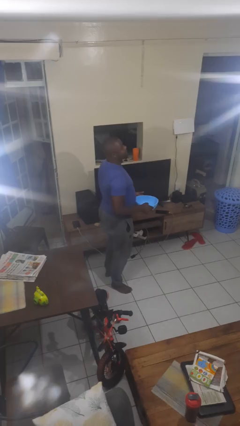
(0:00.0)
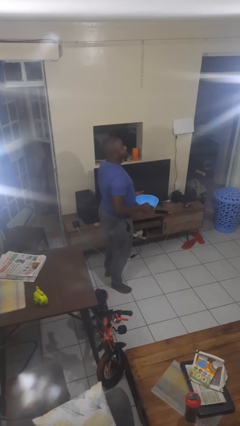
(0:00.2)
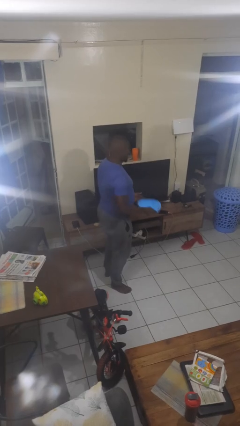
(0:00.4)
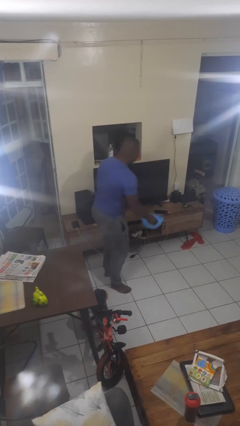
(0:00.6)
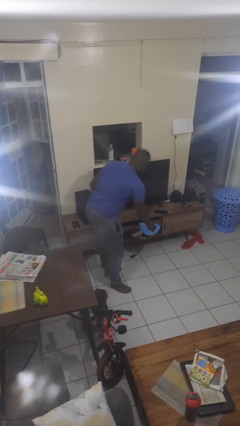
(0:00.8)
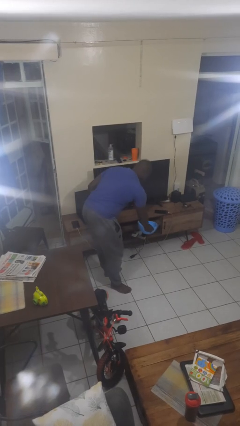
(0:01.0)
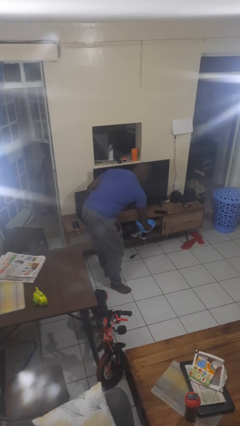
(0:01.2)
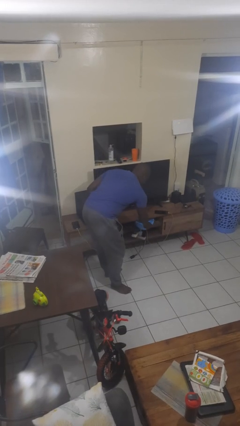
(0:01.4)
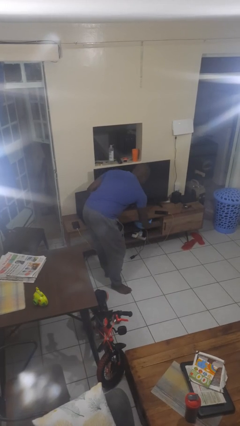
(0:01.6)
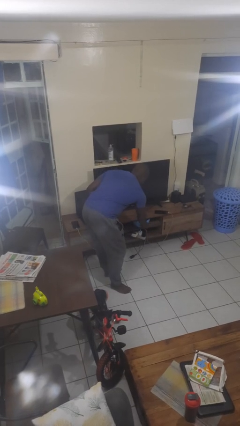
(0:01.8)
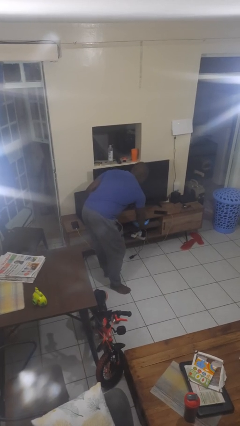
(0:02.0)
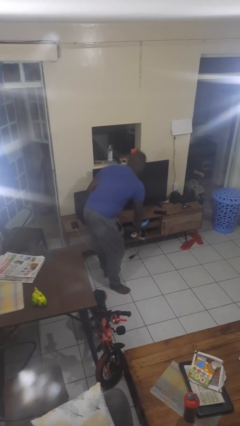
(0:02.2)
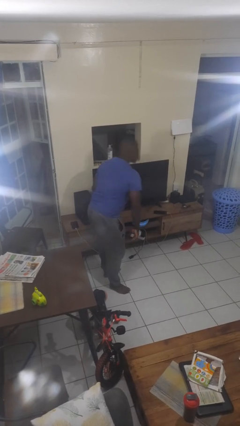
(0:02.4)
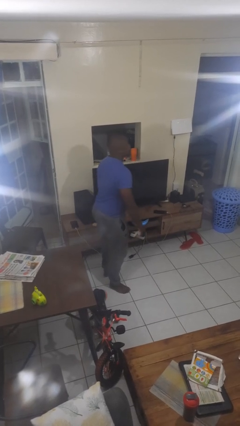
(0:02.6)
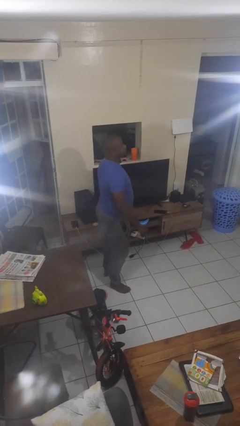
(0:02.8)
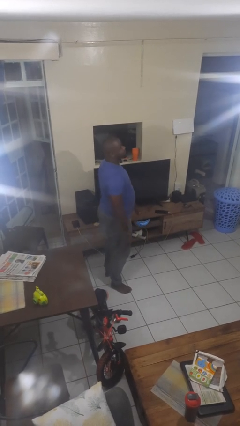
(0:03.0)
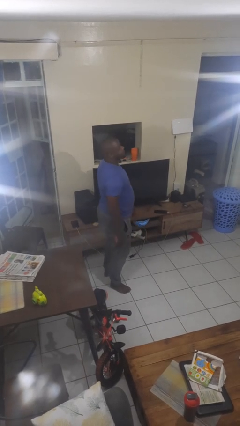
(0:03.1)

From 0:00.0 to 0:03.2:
person puts down object into cabinet

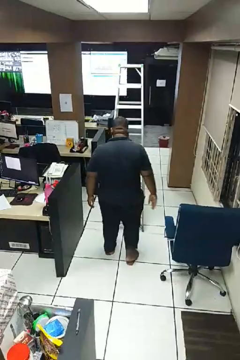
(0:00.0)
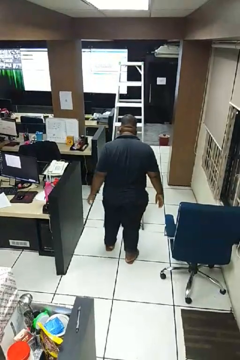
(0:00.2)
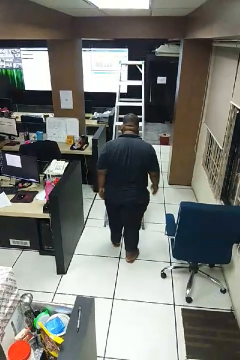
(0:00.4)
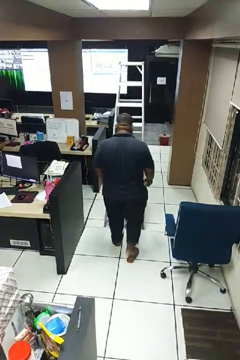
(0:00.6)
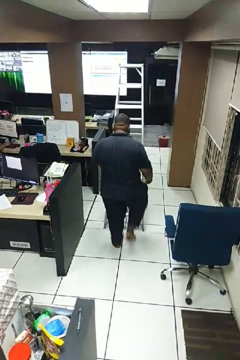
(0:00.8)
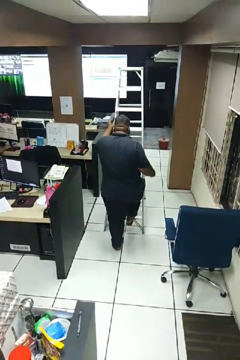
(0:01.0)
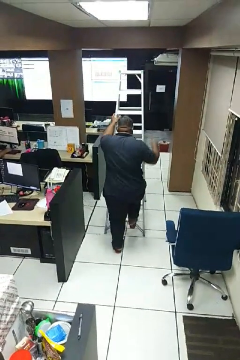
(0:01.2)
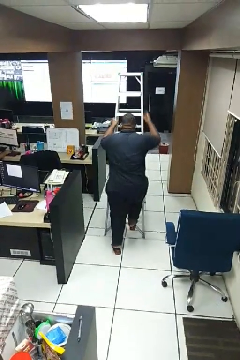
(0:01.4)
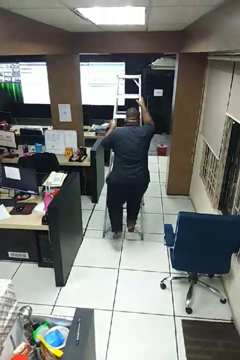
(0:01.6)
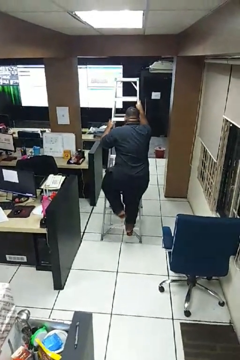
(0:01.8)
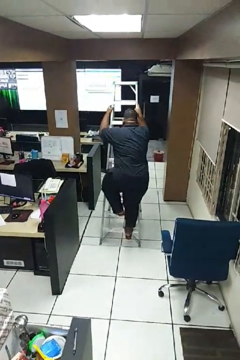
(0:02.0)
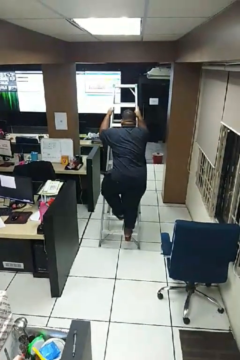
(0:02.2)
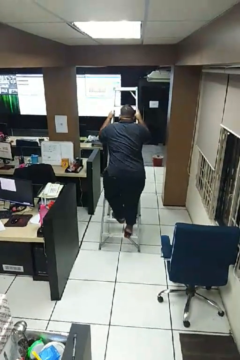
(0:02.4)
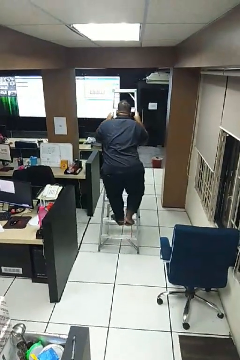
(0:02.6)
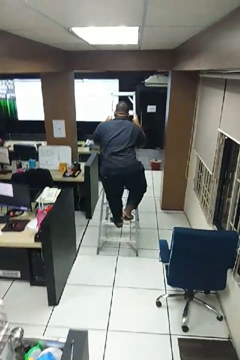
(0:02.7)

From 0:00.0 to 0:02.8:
person climbs up ladder

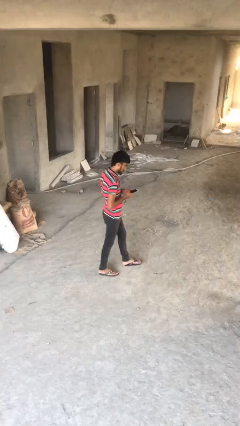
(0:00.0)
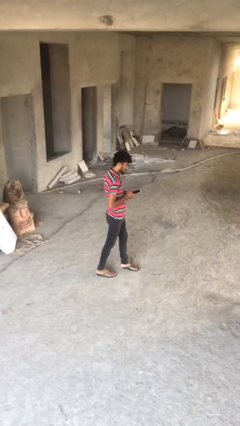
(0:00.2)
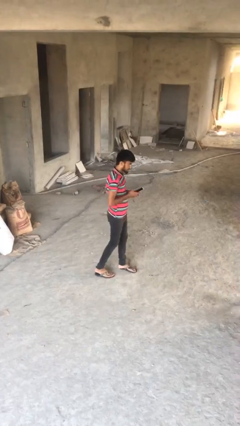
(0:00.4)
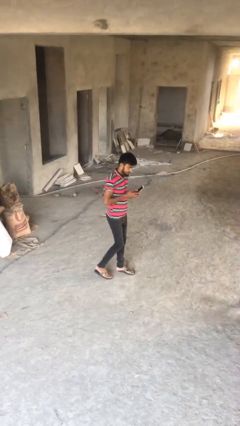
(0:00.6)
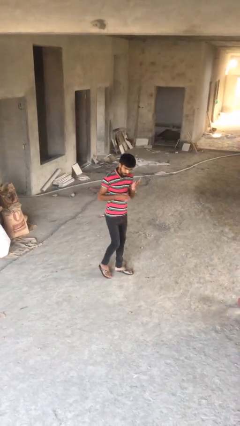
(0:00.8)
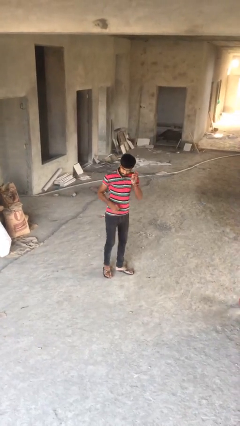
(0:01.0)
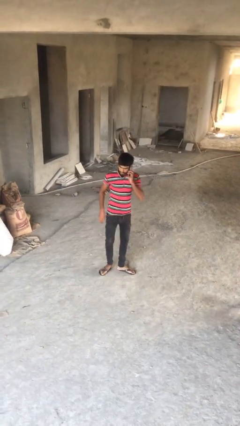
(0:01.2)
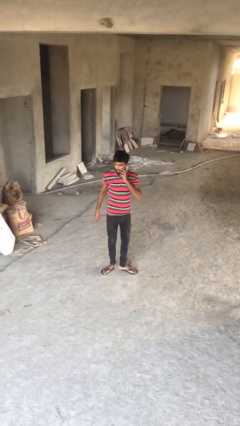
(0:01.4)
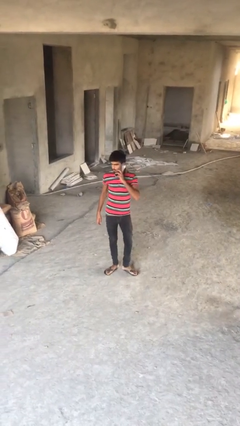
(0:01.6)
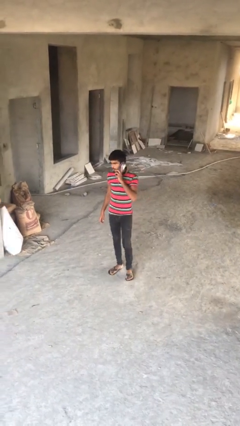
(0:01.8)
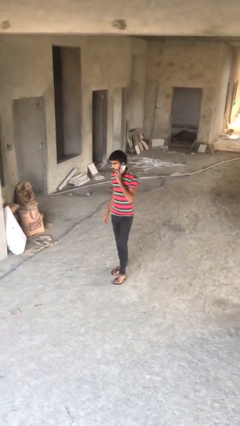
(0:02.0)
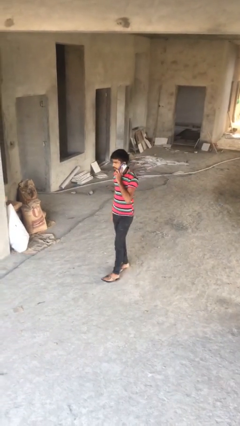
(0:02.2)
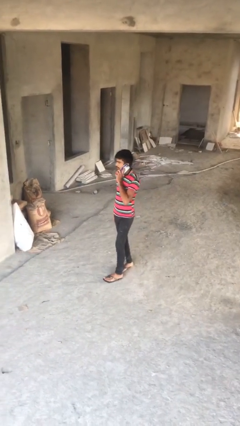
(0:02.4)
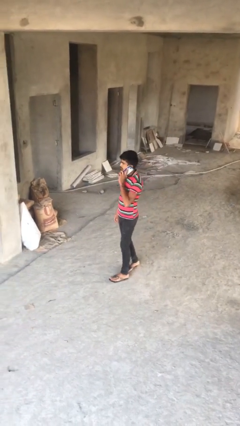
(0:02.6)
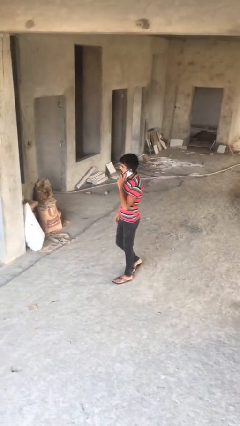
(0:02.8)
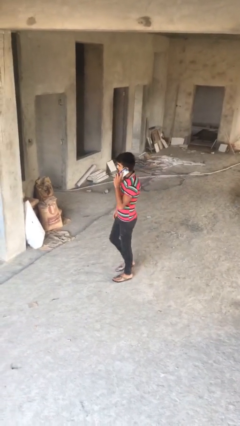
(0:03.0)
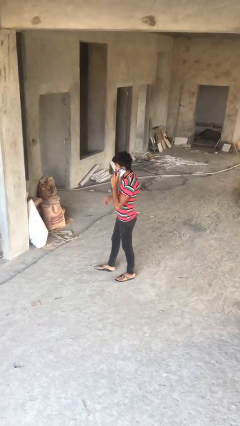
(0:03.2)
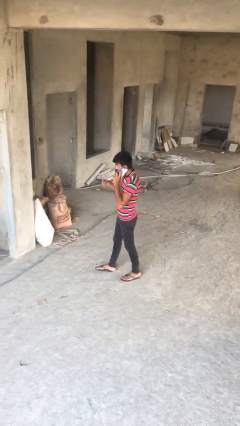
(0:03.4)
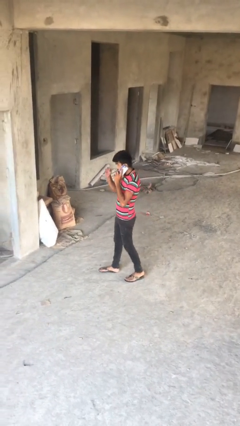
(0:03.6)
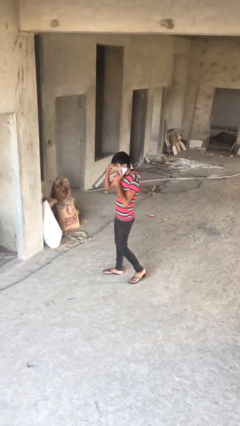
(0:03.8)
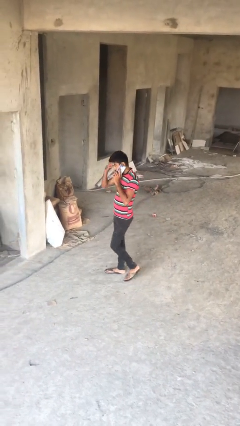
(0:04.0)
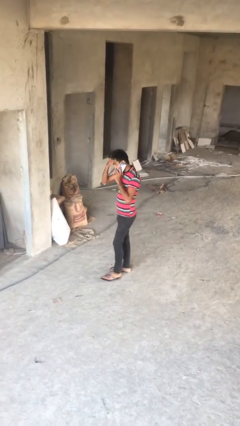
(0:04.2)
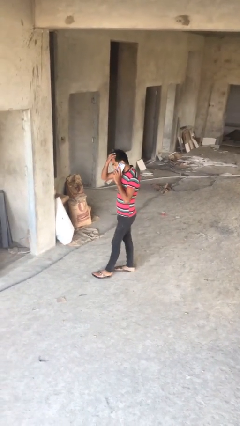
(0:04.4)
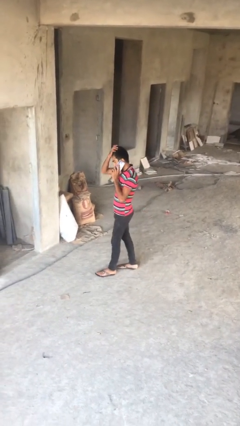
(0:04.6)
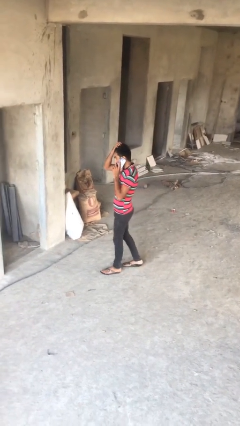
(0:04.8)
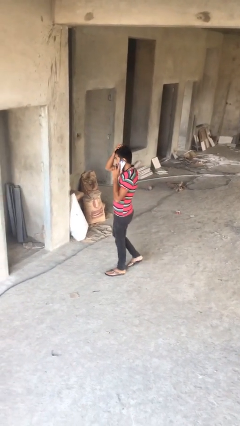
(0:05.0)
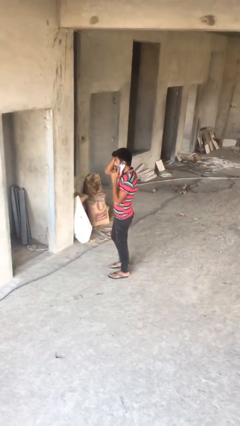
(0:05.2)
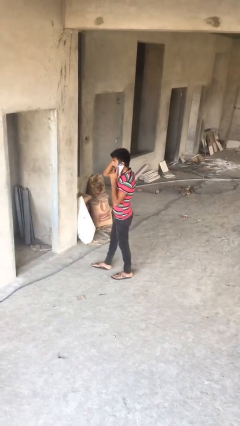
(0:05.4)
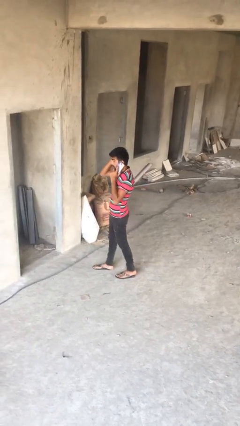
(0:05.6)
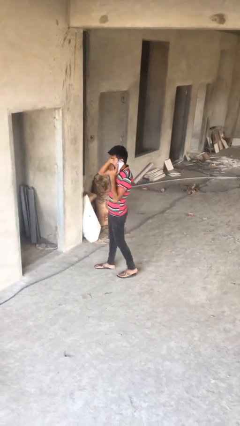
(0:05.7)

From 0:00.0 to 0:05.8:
person talks on phone

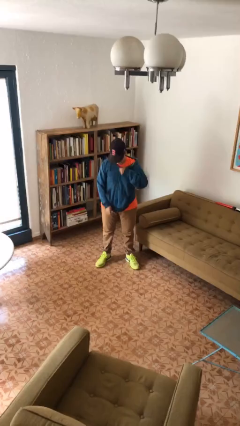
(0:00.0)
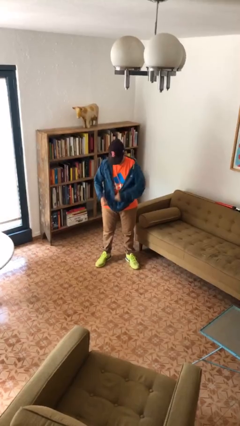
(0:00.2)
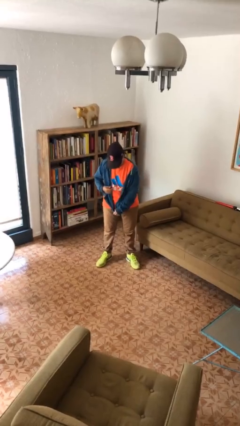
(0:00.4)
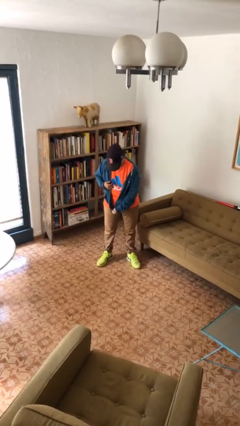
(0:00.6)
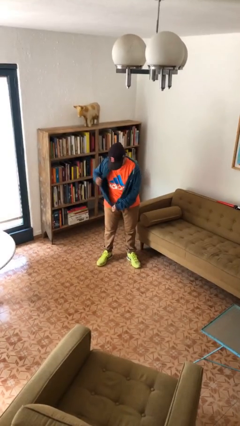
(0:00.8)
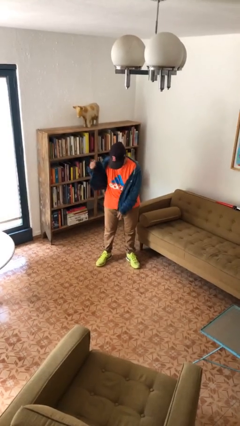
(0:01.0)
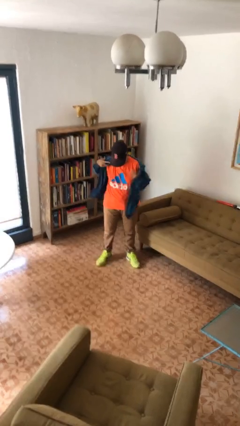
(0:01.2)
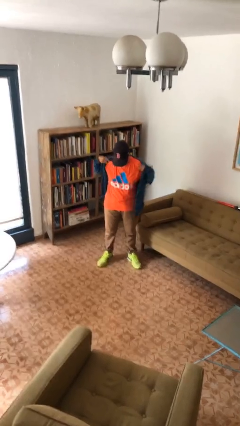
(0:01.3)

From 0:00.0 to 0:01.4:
person unzips jacket

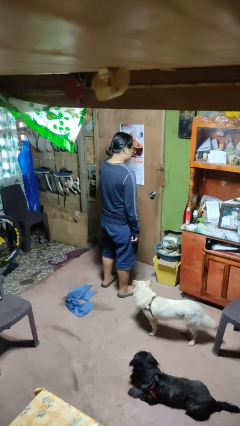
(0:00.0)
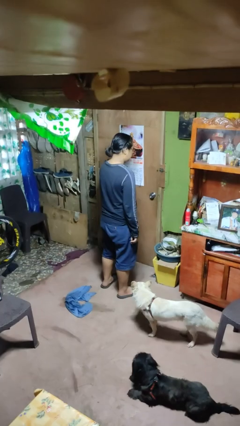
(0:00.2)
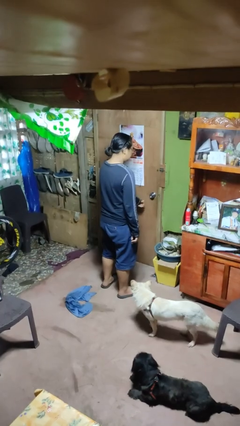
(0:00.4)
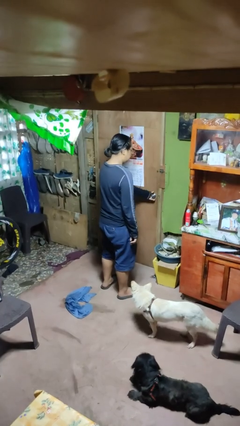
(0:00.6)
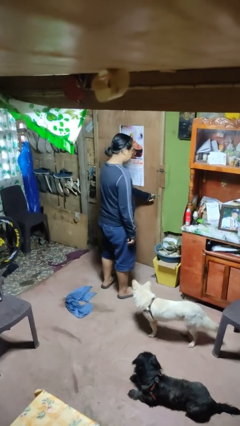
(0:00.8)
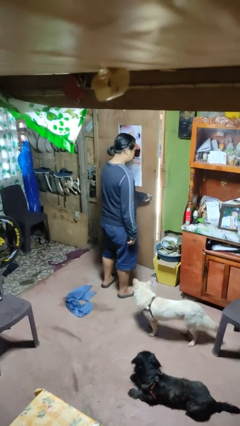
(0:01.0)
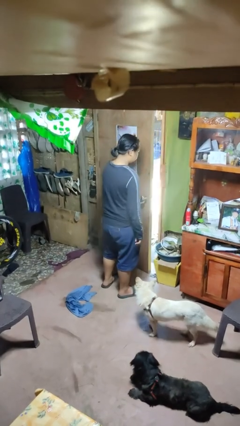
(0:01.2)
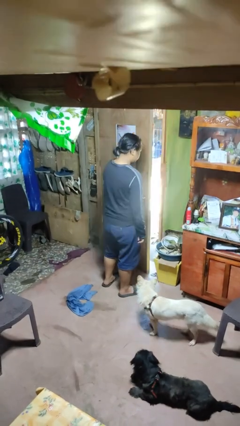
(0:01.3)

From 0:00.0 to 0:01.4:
person opens facility door

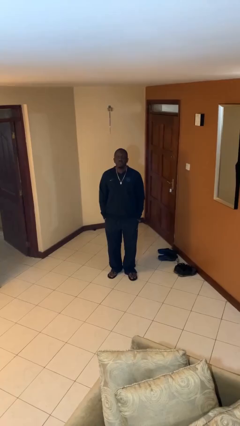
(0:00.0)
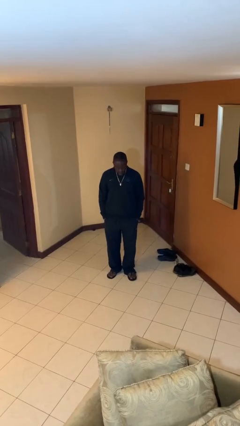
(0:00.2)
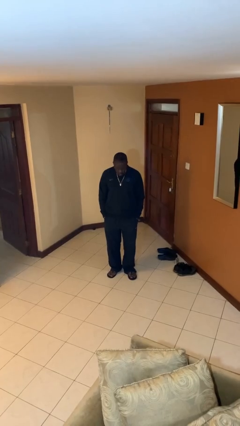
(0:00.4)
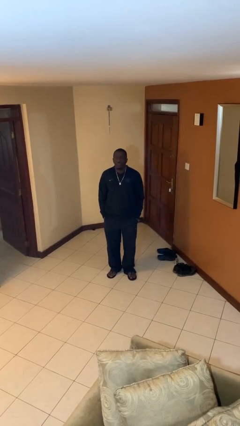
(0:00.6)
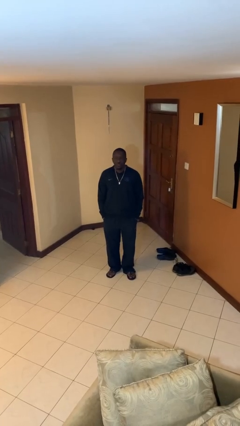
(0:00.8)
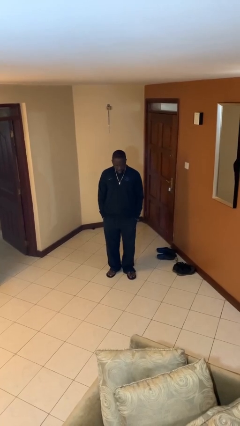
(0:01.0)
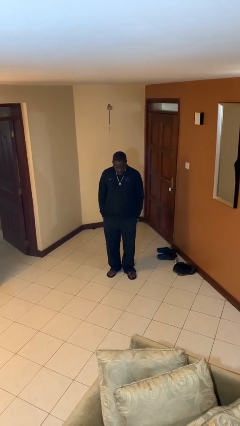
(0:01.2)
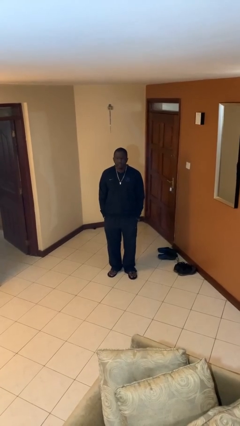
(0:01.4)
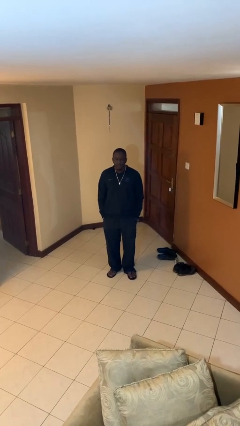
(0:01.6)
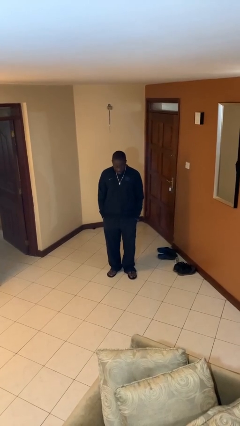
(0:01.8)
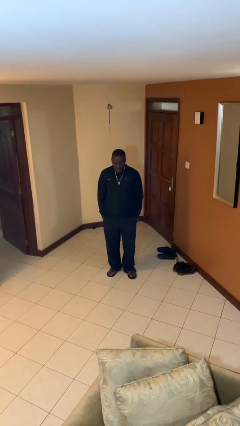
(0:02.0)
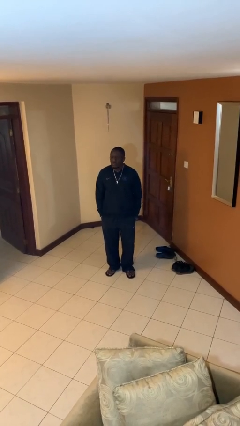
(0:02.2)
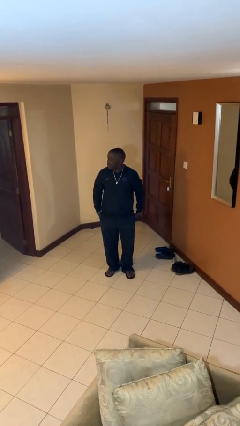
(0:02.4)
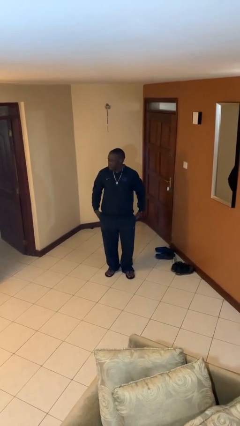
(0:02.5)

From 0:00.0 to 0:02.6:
person nods head

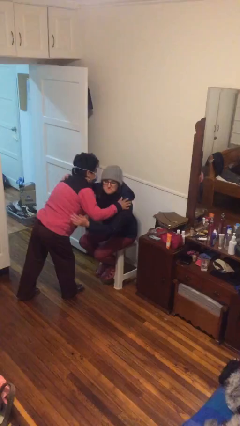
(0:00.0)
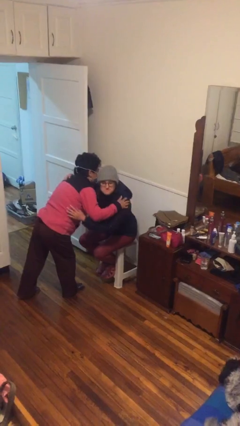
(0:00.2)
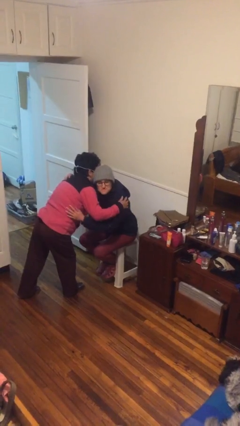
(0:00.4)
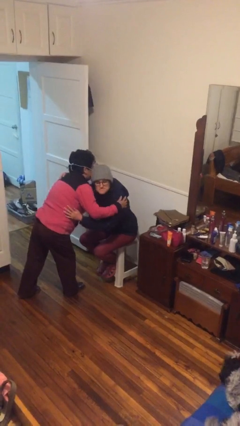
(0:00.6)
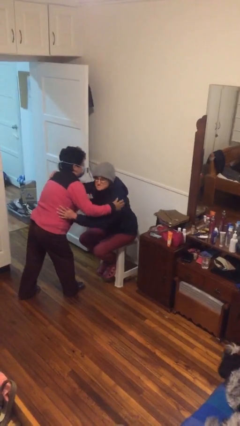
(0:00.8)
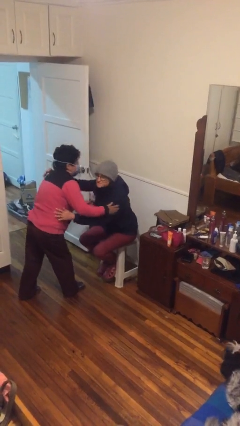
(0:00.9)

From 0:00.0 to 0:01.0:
person embraces person
